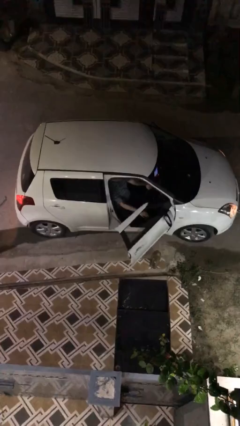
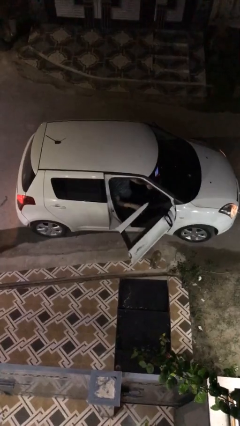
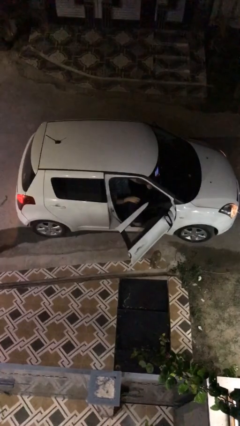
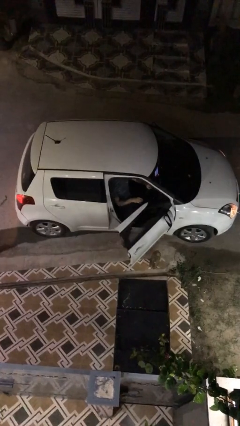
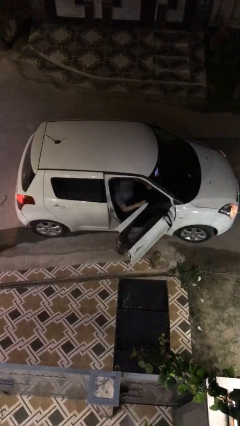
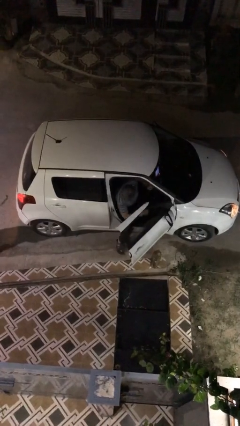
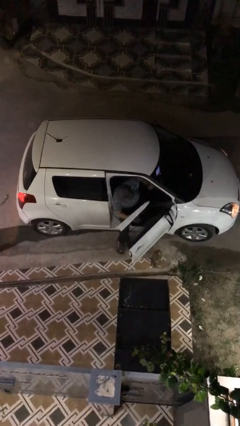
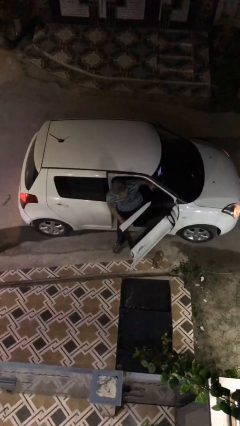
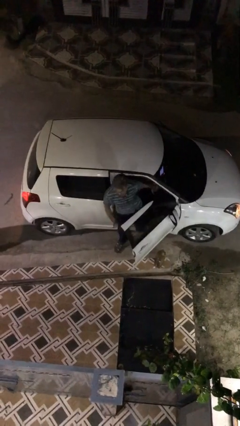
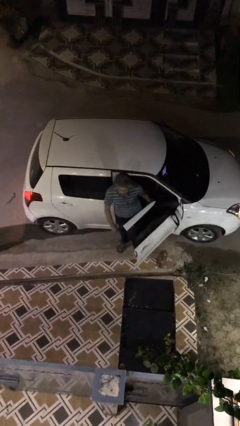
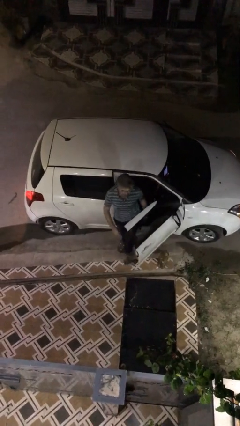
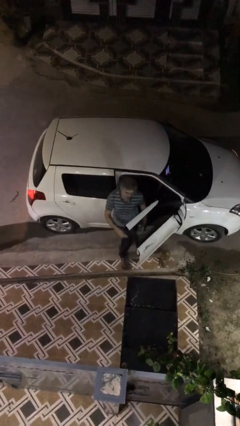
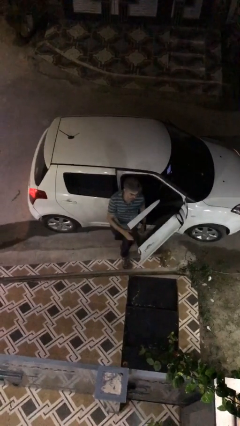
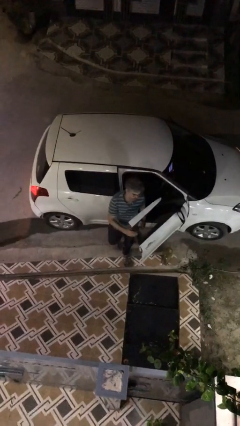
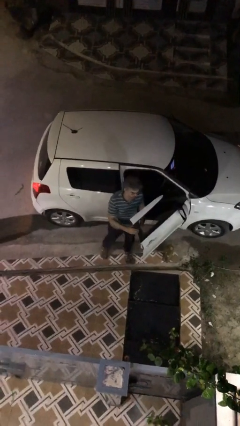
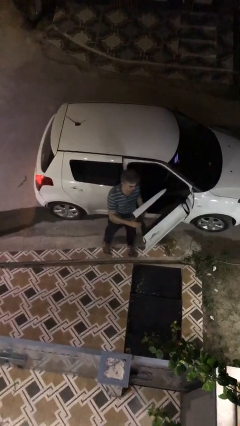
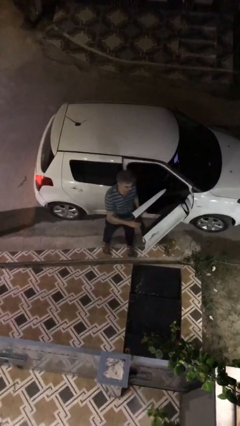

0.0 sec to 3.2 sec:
person exits car

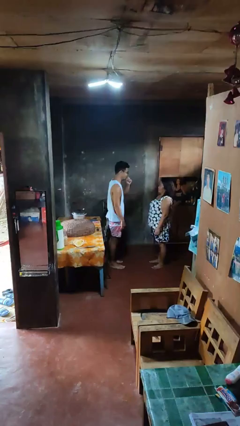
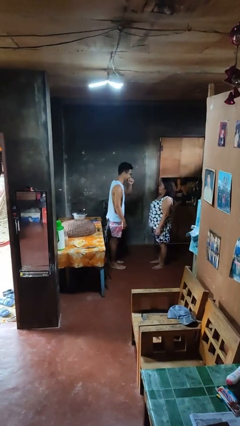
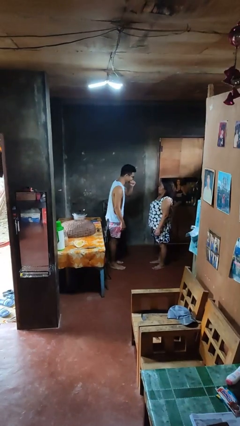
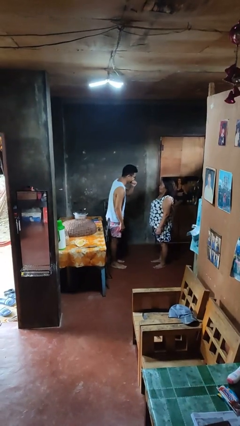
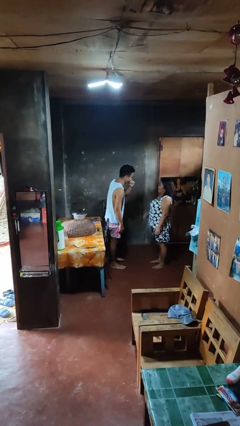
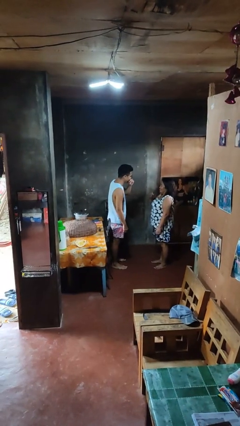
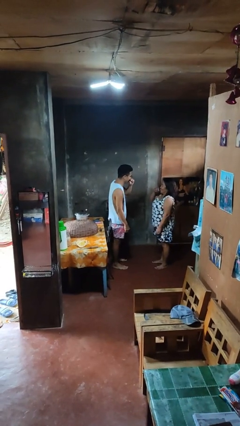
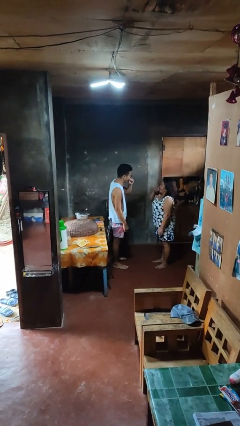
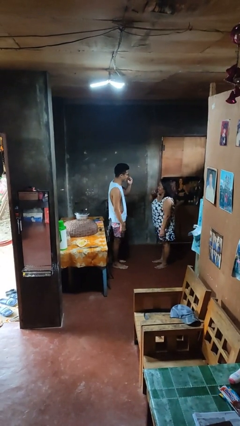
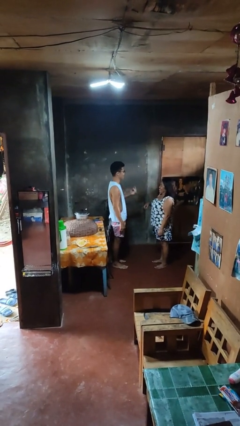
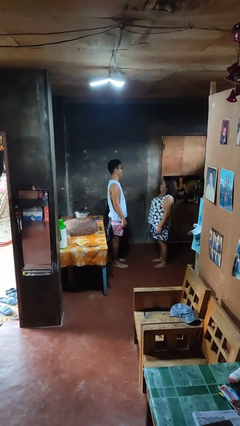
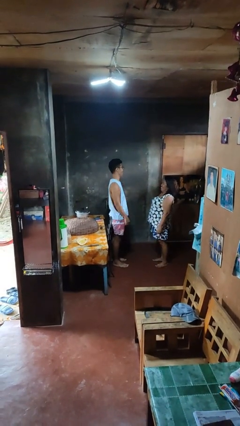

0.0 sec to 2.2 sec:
person laughs with person

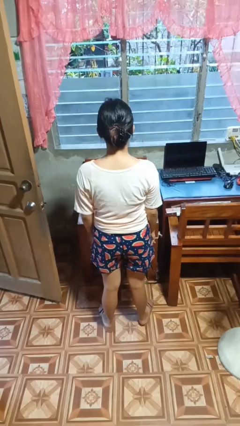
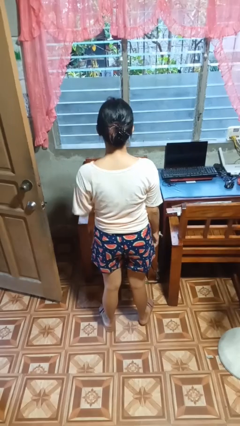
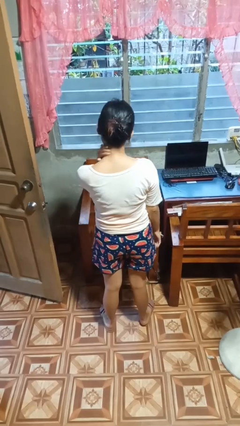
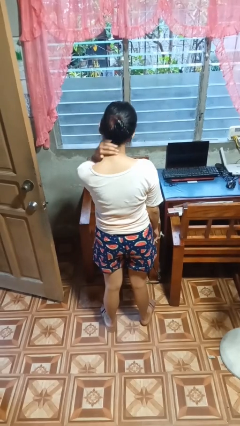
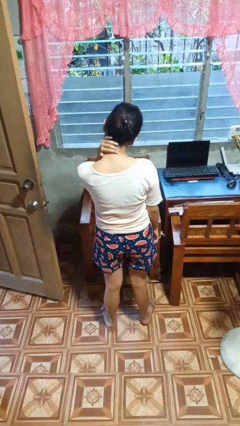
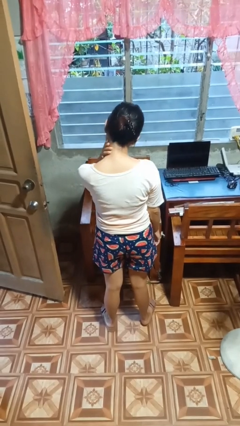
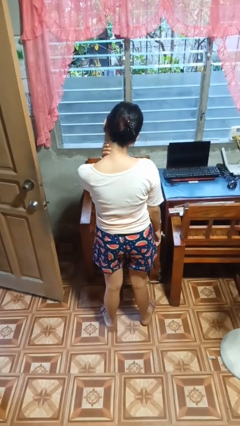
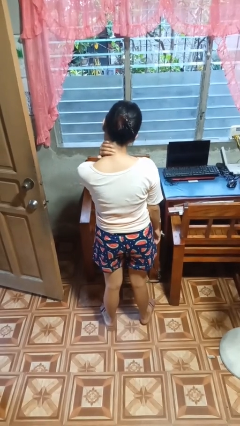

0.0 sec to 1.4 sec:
person rubs neck

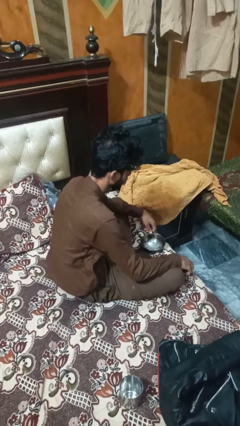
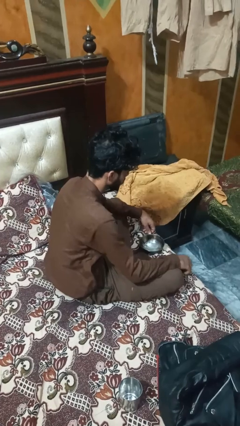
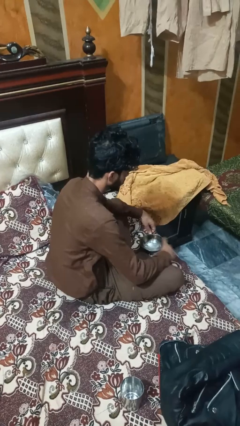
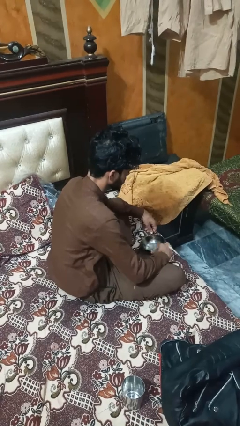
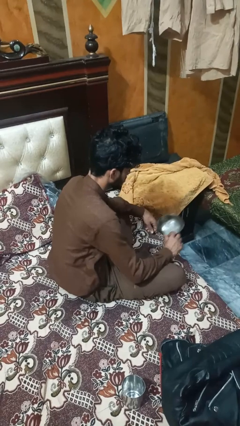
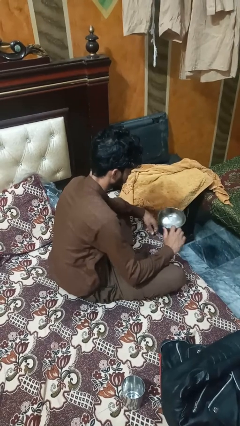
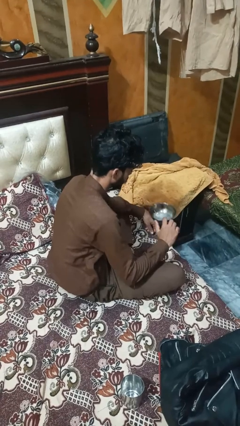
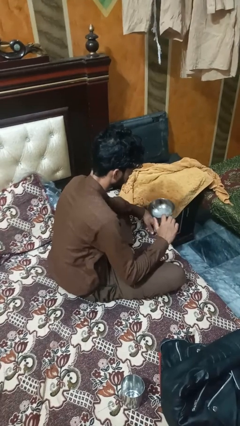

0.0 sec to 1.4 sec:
person picks up object from table

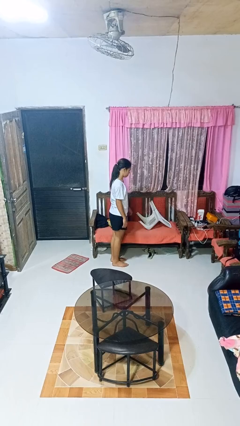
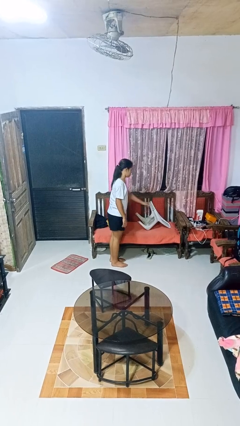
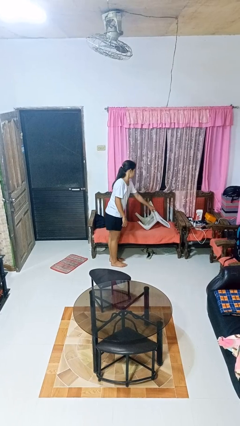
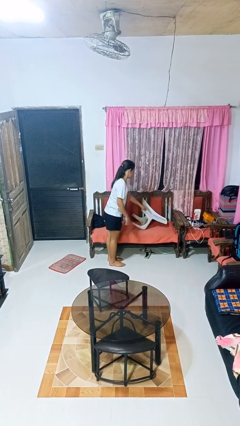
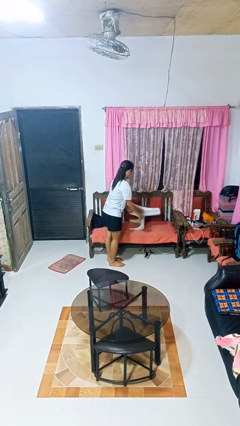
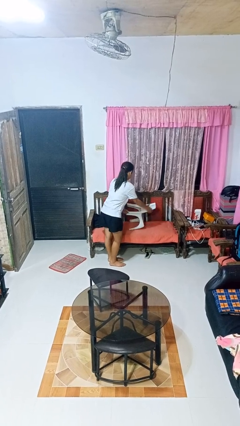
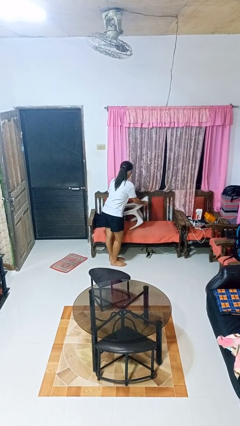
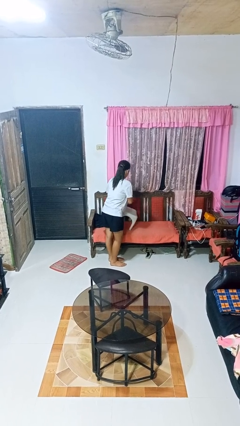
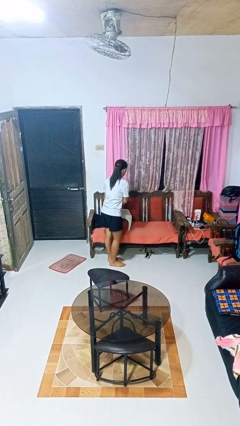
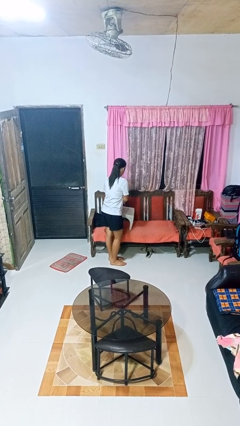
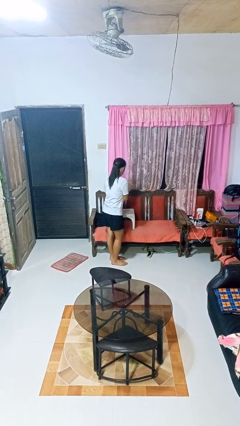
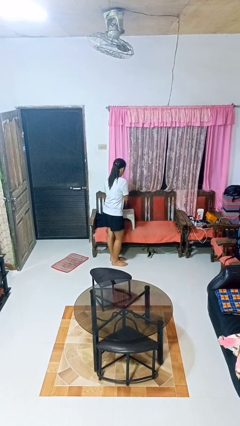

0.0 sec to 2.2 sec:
person sets upright furniture

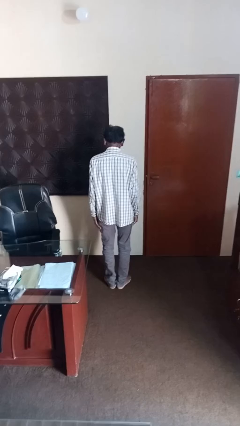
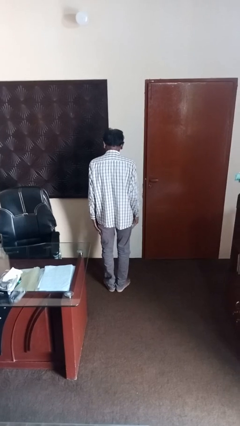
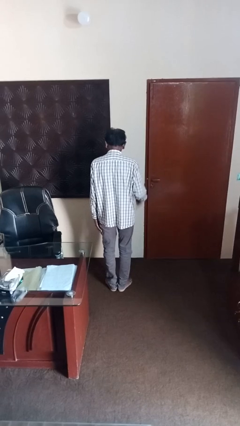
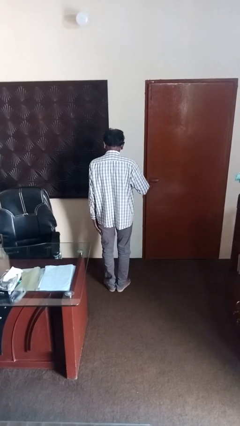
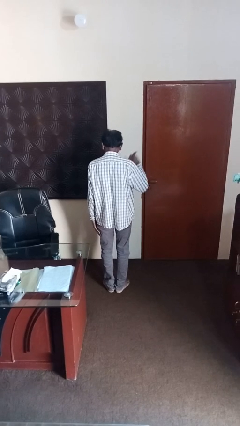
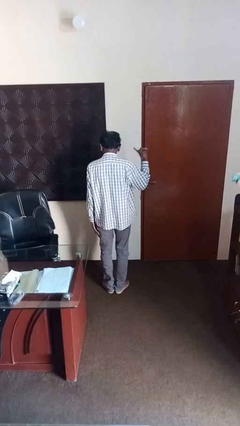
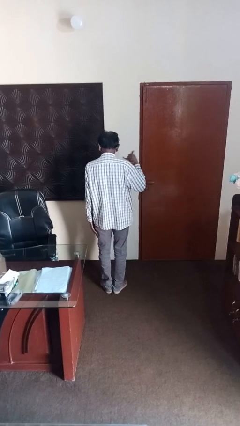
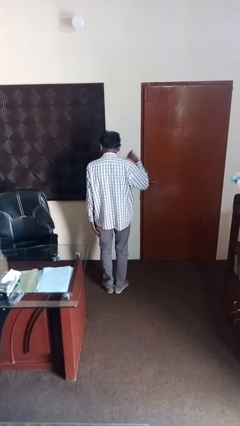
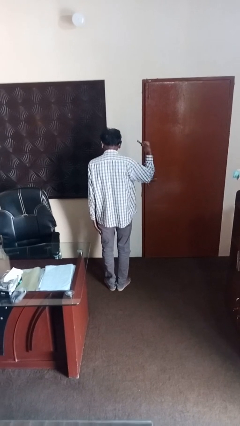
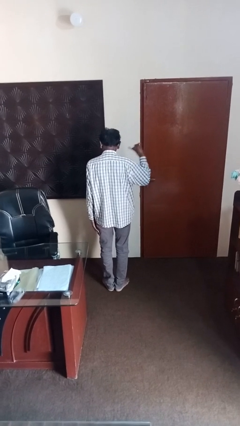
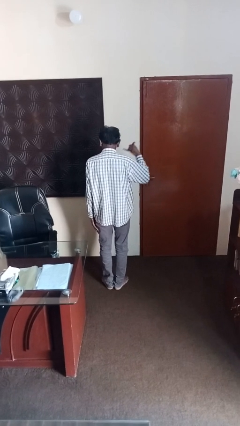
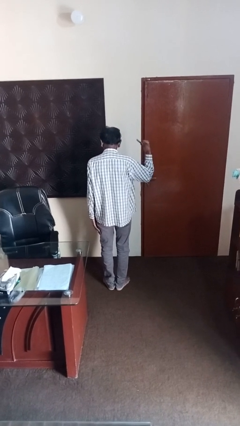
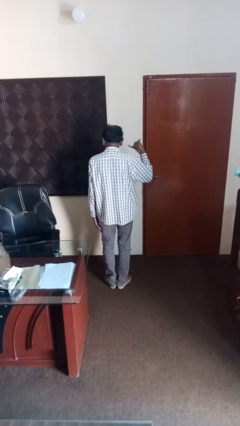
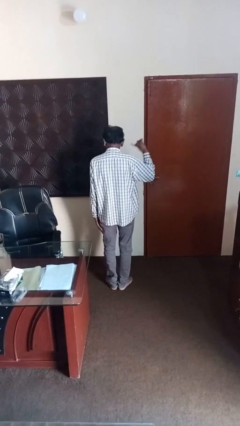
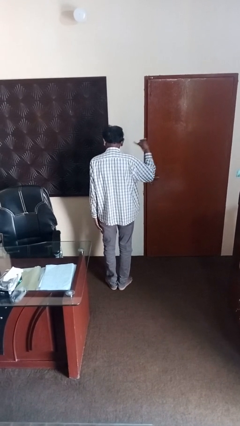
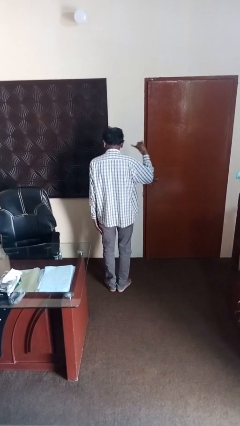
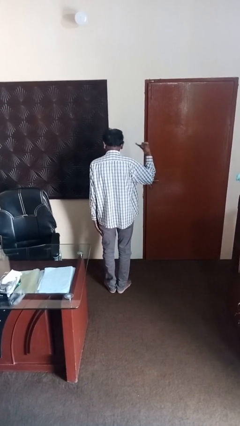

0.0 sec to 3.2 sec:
person gestures hang loose

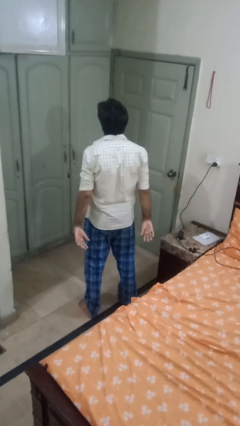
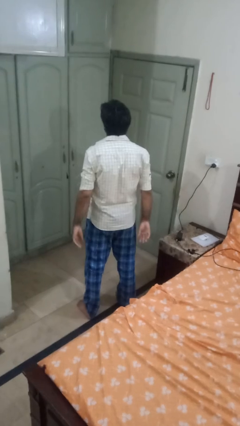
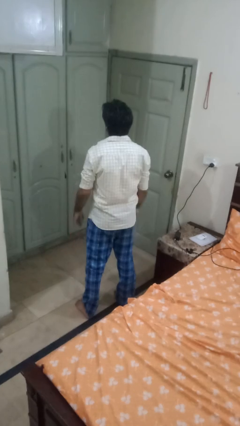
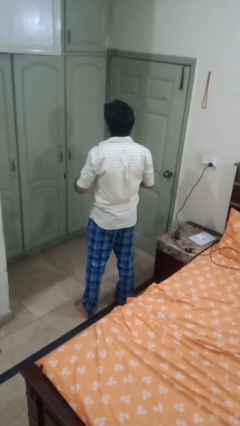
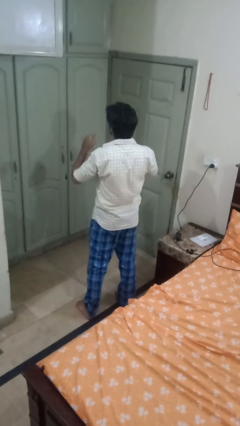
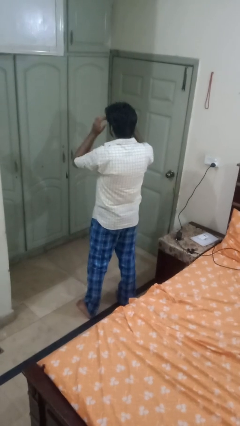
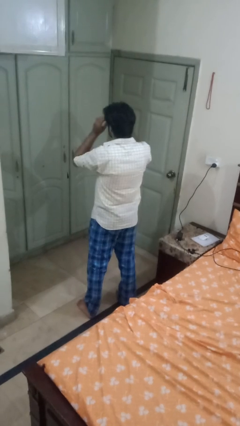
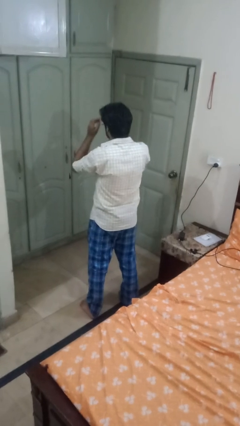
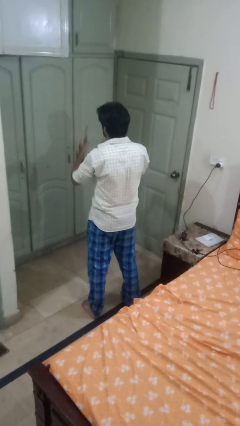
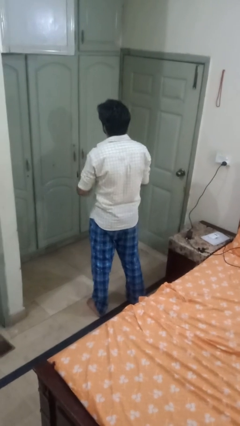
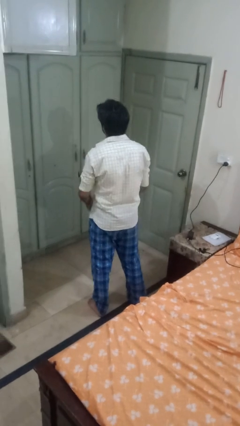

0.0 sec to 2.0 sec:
person takes off glasses

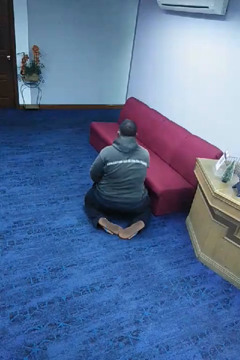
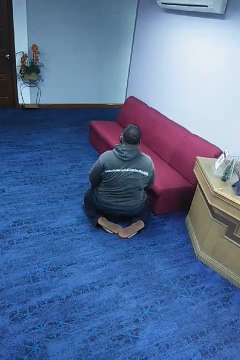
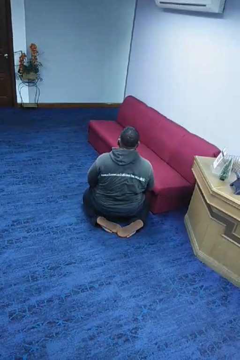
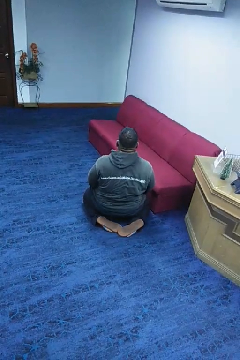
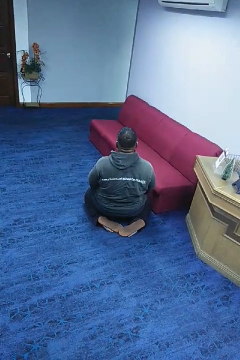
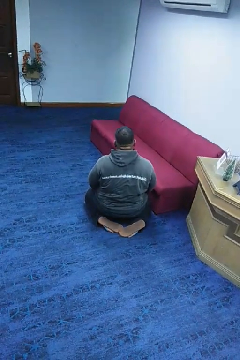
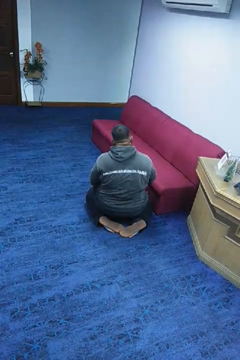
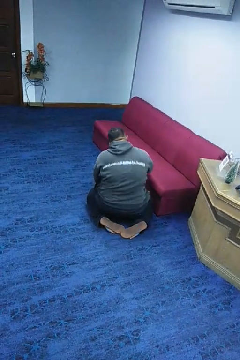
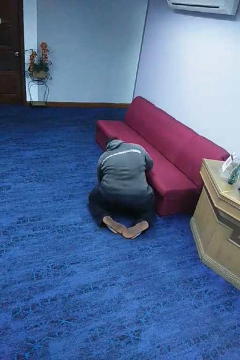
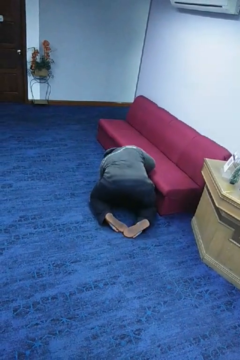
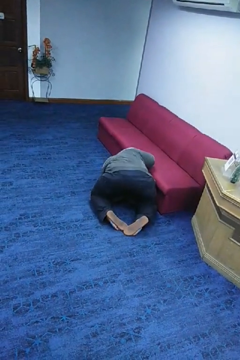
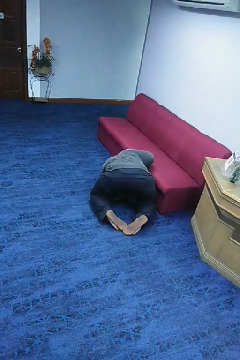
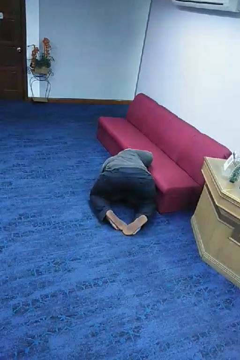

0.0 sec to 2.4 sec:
person searches under couch
